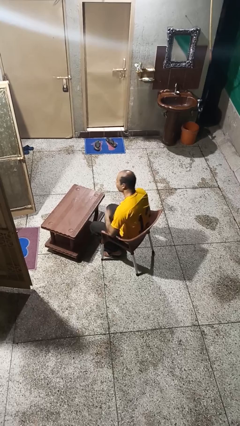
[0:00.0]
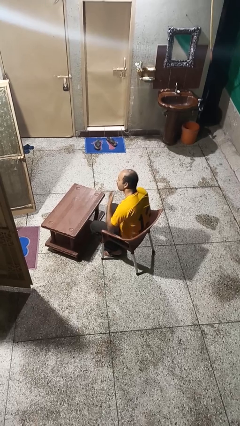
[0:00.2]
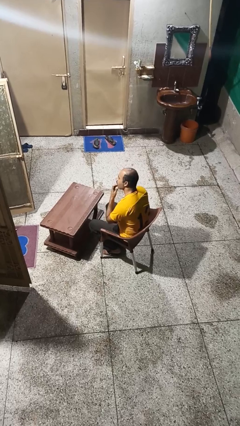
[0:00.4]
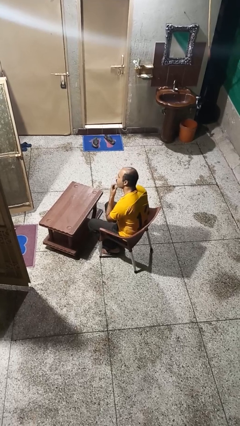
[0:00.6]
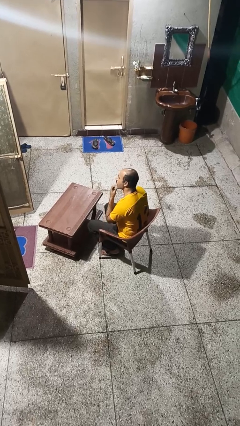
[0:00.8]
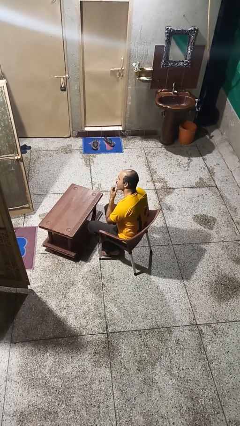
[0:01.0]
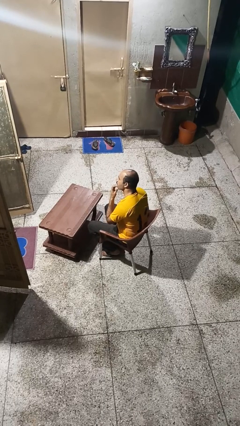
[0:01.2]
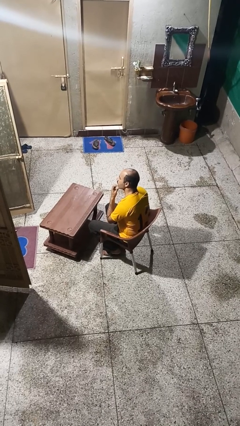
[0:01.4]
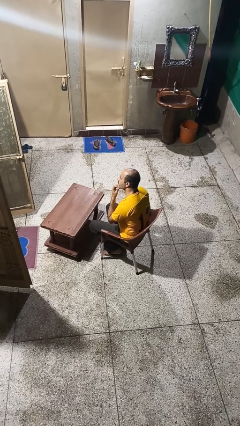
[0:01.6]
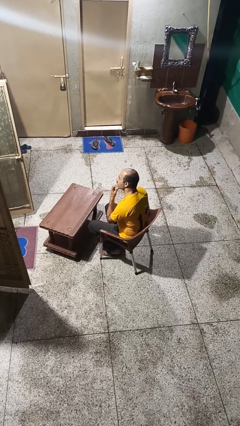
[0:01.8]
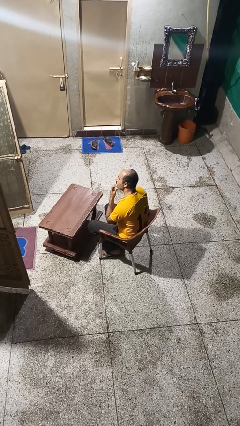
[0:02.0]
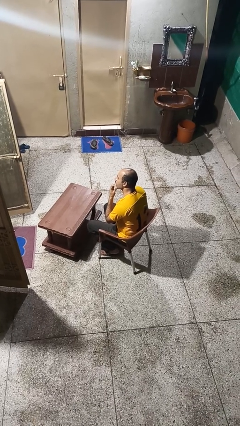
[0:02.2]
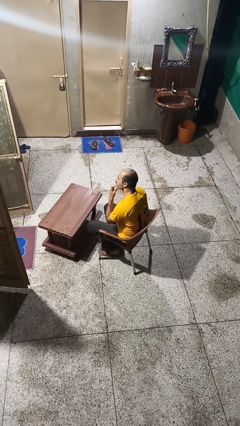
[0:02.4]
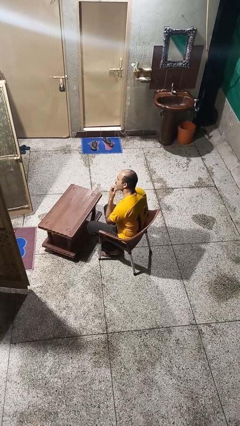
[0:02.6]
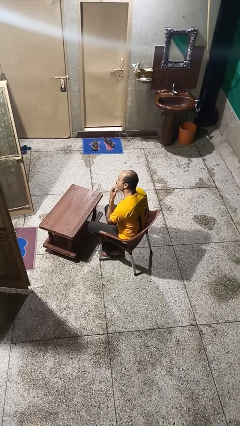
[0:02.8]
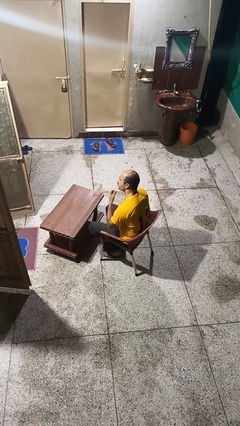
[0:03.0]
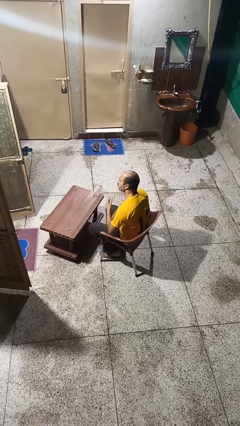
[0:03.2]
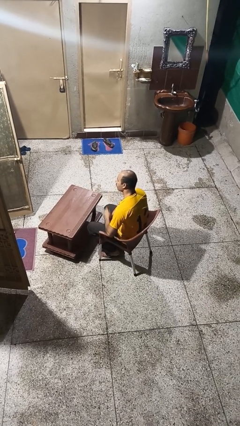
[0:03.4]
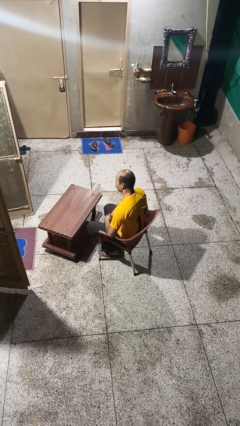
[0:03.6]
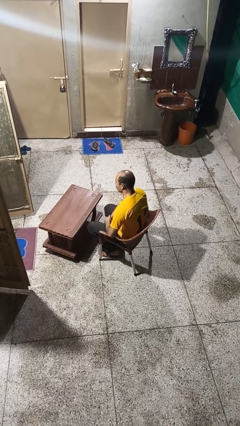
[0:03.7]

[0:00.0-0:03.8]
person strokes chin

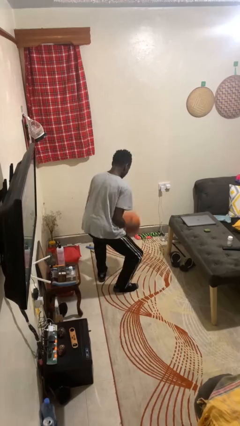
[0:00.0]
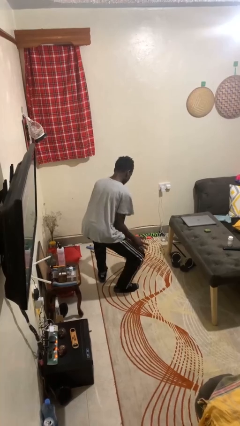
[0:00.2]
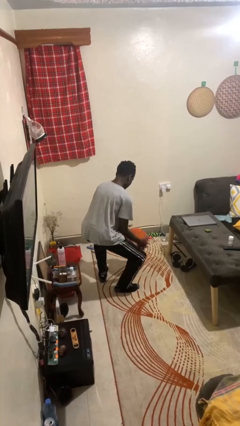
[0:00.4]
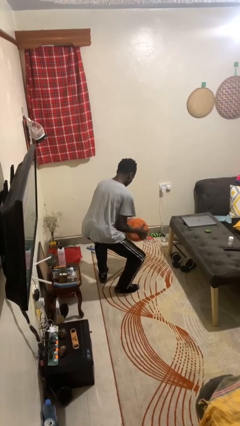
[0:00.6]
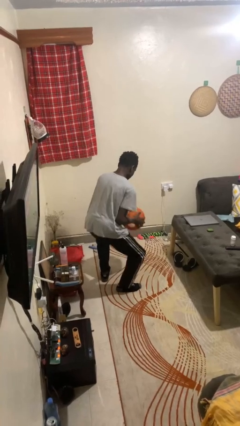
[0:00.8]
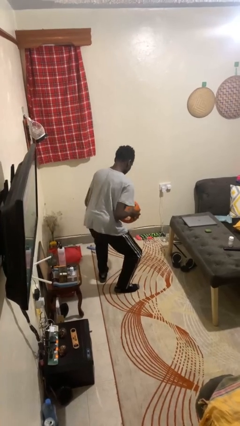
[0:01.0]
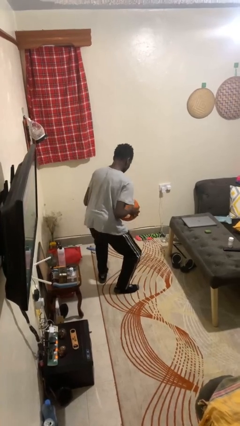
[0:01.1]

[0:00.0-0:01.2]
person bounces ball on floor

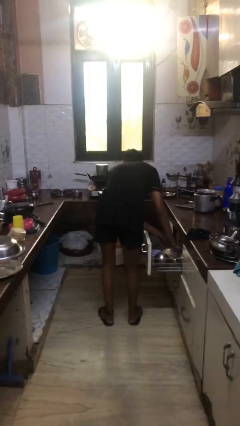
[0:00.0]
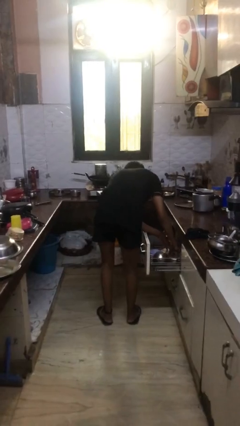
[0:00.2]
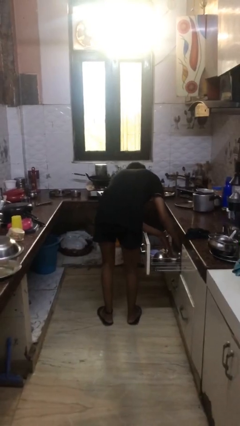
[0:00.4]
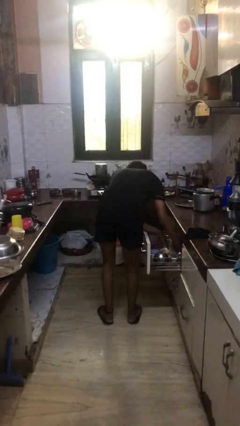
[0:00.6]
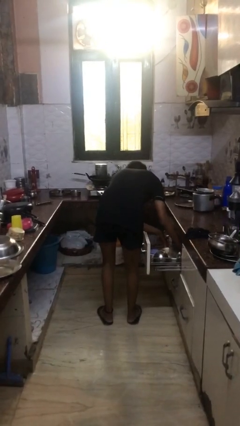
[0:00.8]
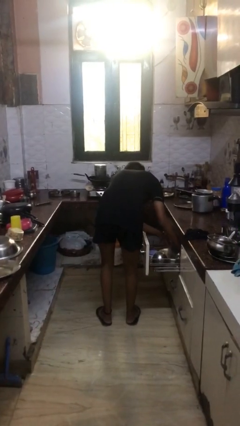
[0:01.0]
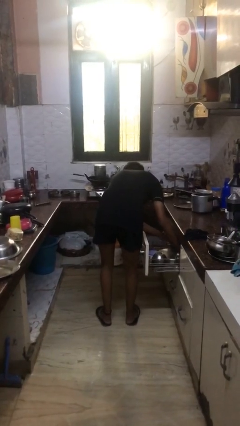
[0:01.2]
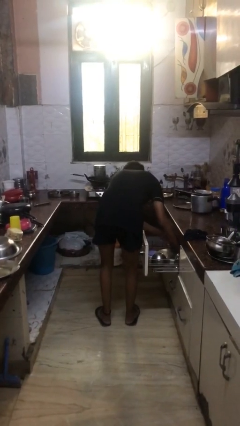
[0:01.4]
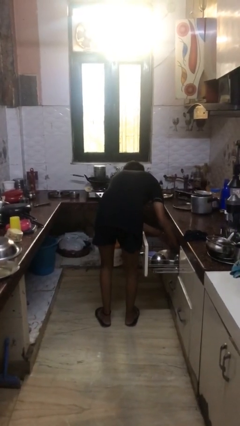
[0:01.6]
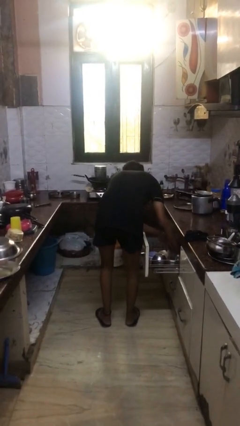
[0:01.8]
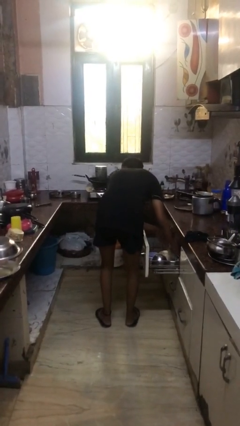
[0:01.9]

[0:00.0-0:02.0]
person searches in kitchen drawer

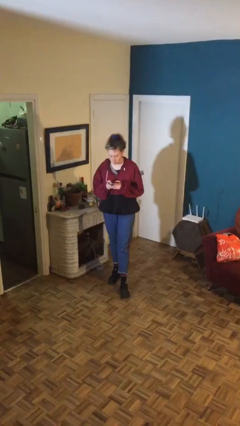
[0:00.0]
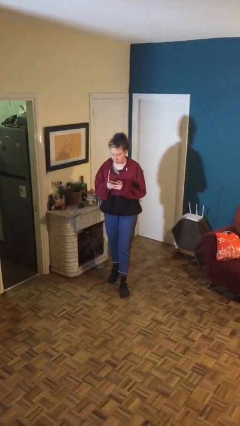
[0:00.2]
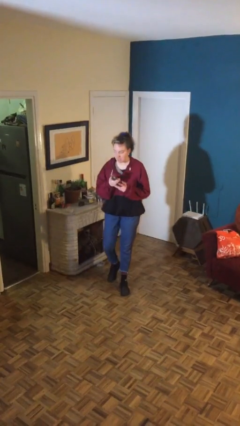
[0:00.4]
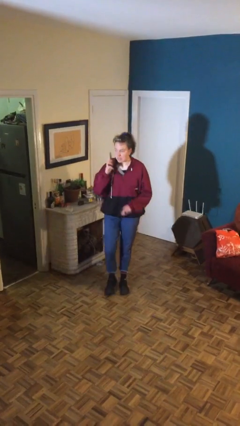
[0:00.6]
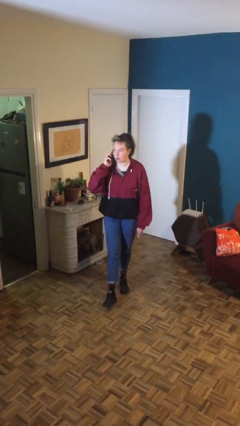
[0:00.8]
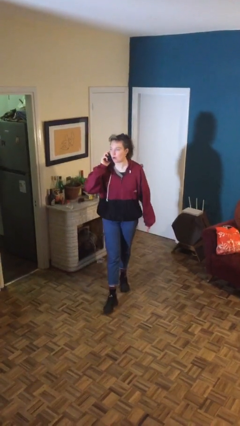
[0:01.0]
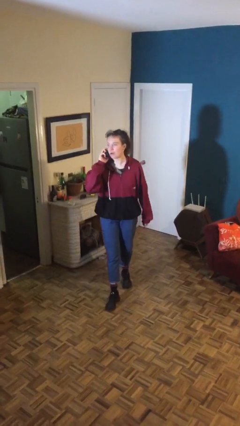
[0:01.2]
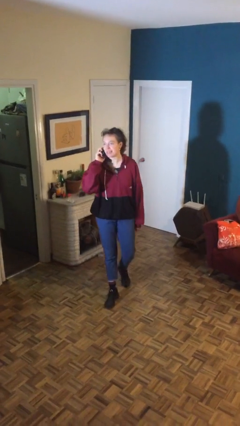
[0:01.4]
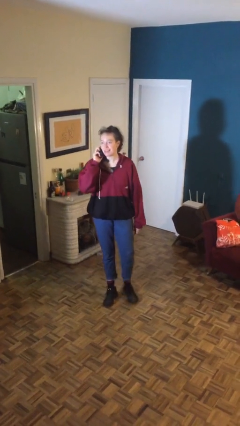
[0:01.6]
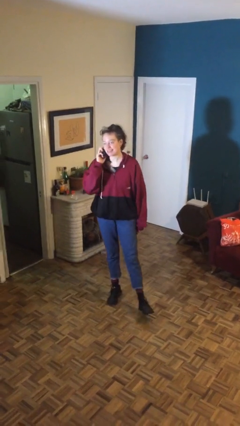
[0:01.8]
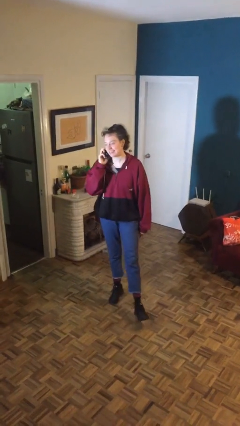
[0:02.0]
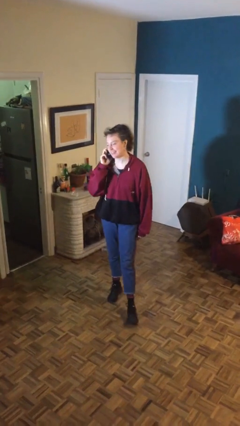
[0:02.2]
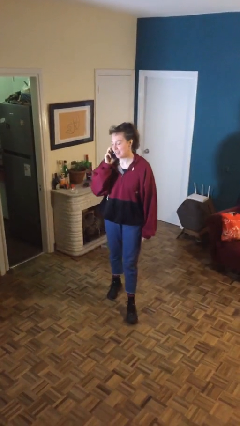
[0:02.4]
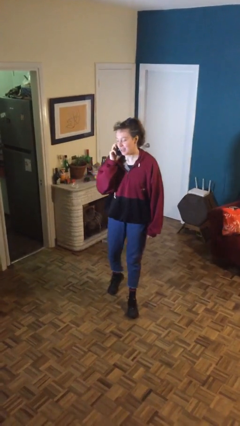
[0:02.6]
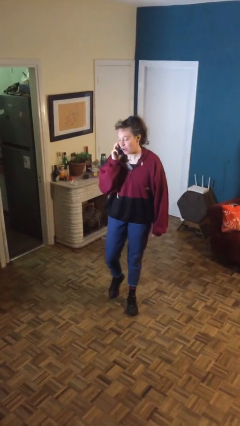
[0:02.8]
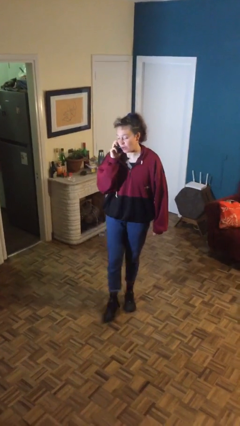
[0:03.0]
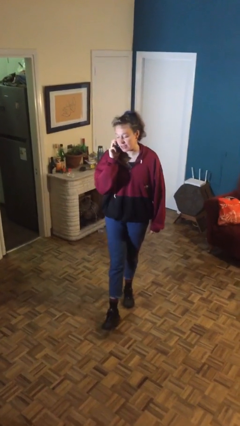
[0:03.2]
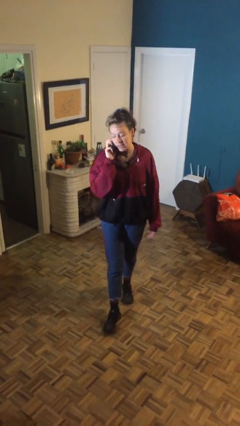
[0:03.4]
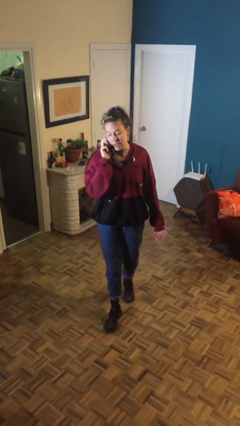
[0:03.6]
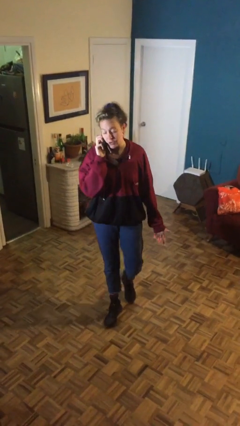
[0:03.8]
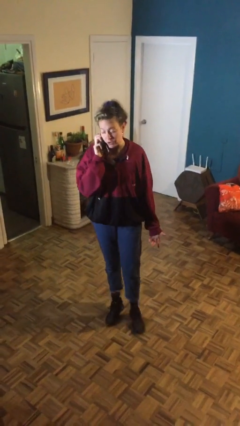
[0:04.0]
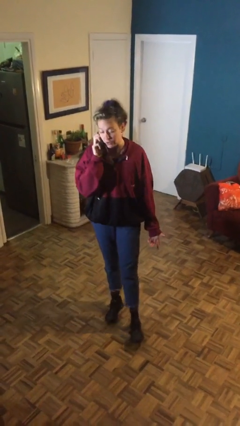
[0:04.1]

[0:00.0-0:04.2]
person talks on phone

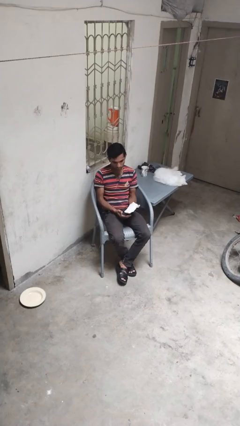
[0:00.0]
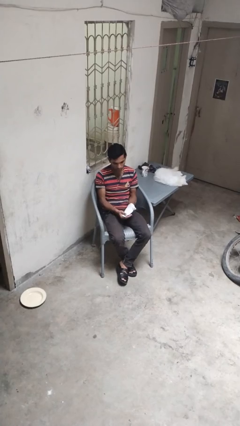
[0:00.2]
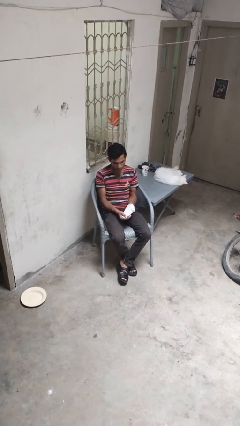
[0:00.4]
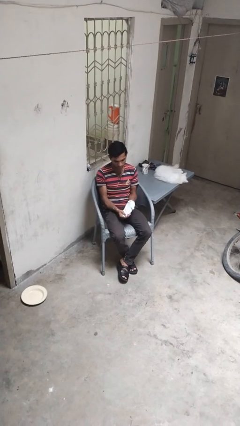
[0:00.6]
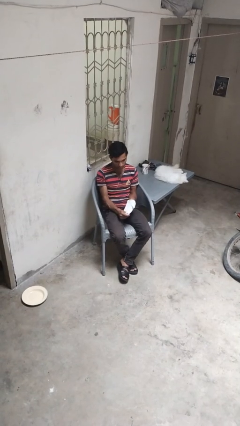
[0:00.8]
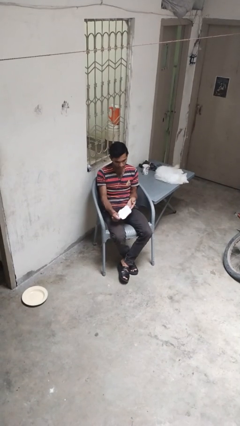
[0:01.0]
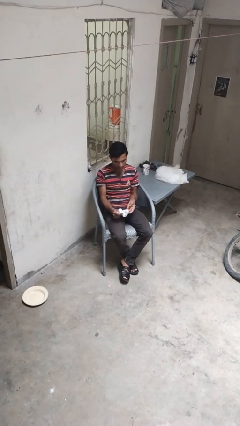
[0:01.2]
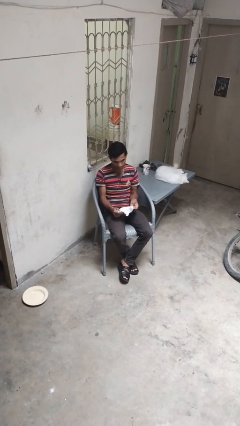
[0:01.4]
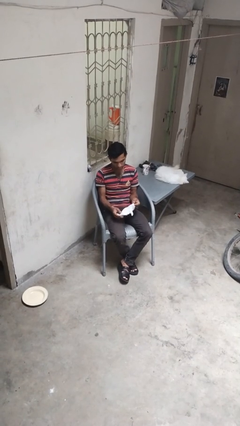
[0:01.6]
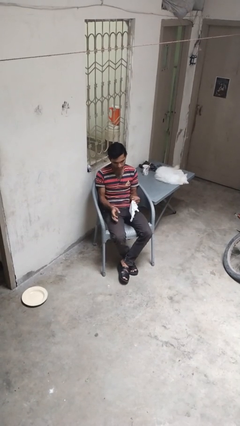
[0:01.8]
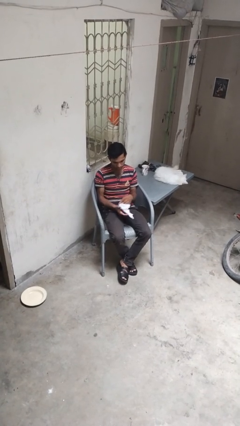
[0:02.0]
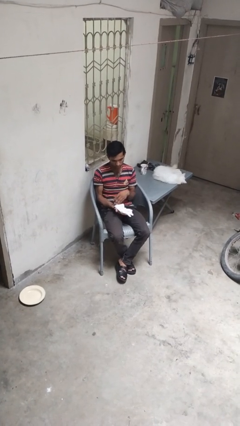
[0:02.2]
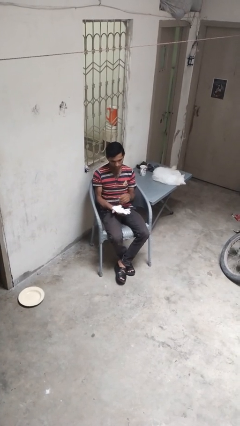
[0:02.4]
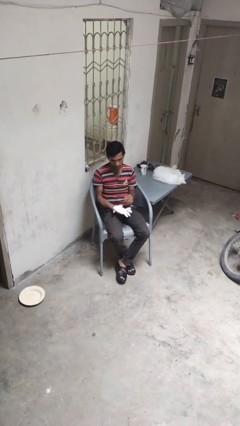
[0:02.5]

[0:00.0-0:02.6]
person takes off gloves

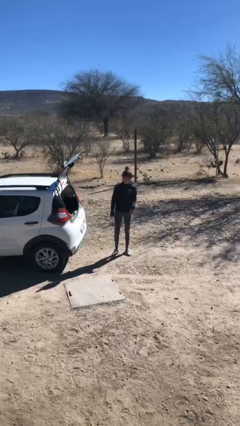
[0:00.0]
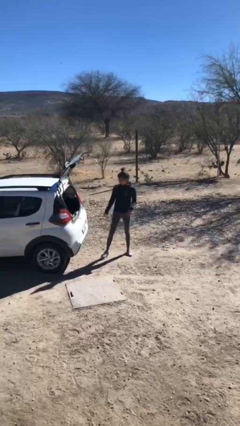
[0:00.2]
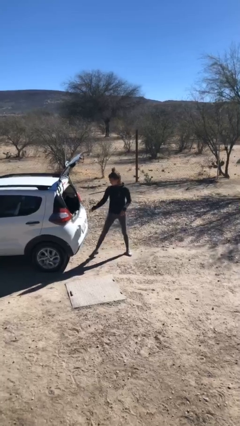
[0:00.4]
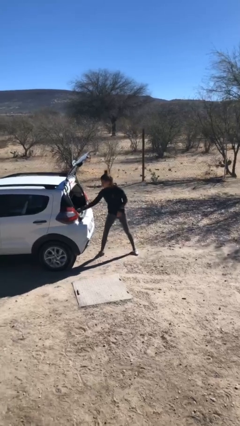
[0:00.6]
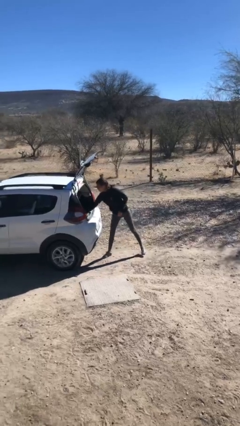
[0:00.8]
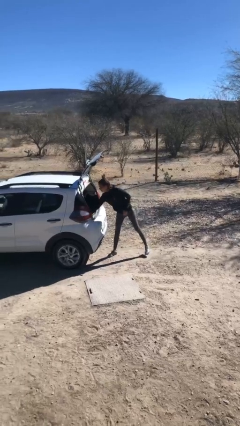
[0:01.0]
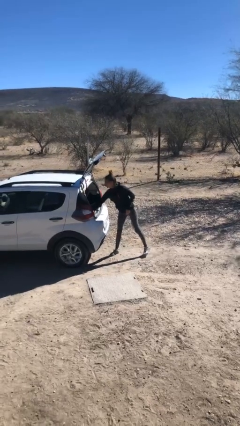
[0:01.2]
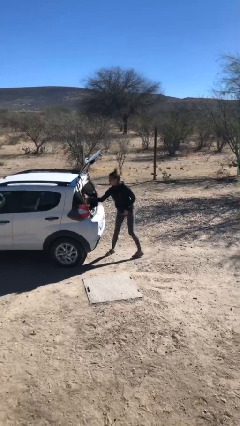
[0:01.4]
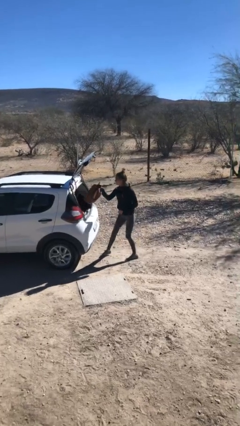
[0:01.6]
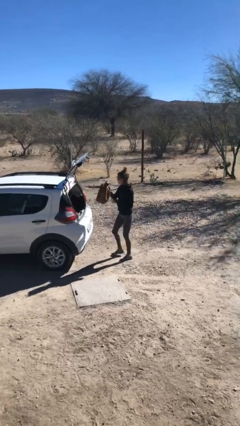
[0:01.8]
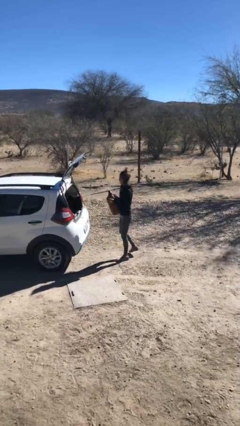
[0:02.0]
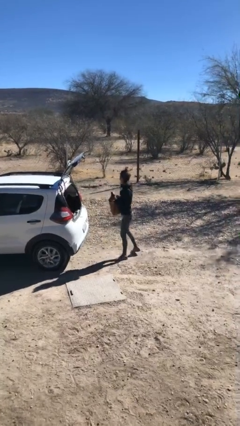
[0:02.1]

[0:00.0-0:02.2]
person unloads car

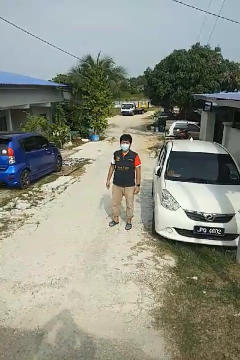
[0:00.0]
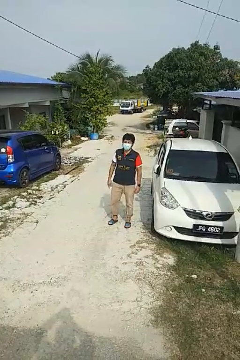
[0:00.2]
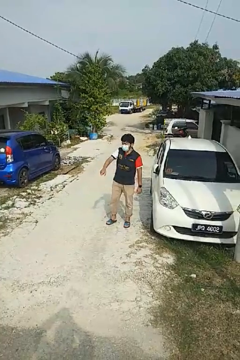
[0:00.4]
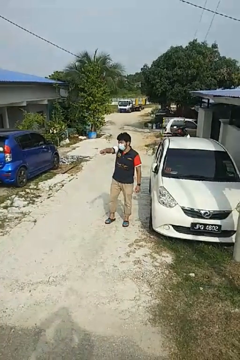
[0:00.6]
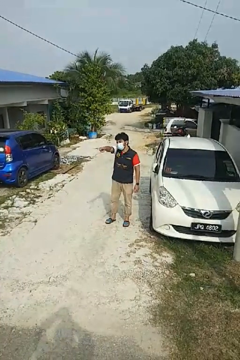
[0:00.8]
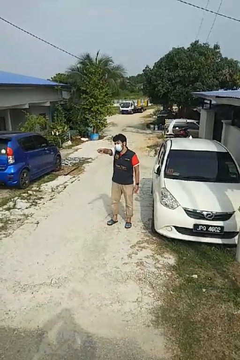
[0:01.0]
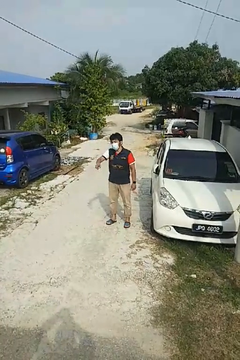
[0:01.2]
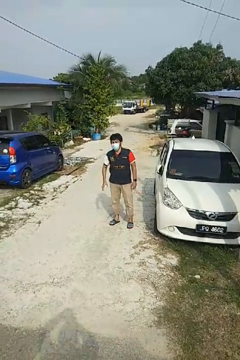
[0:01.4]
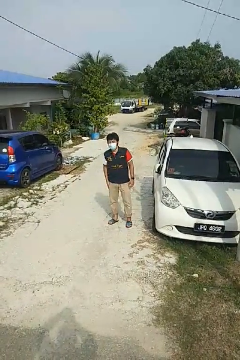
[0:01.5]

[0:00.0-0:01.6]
person points at person
